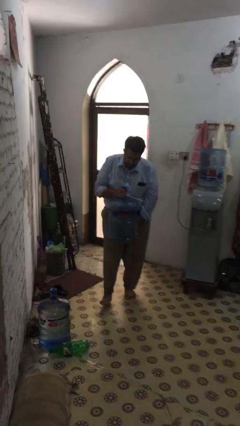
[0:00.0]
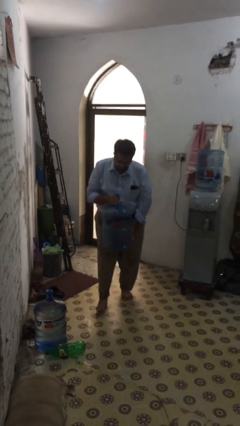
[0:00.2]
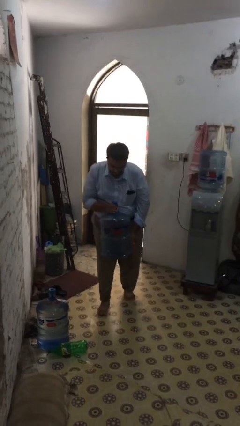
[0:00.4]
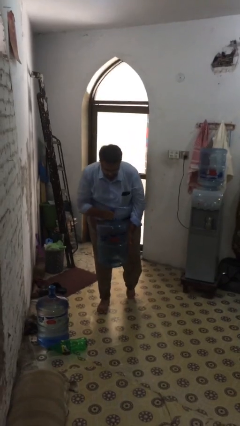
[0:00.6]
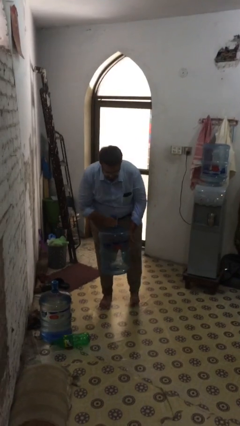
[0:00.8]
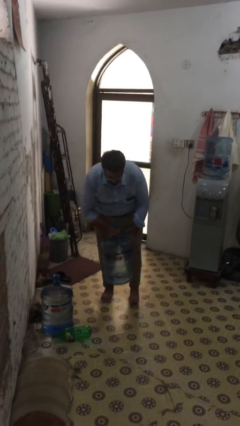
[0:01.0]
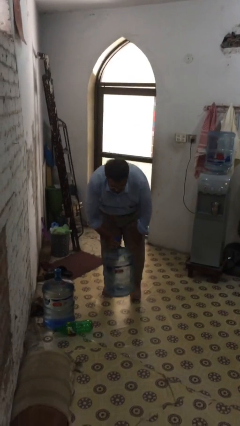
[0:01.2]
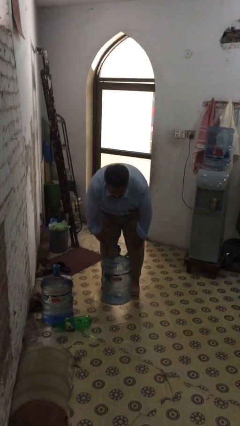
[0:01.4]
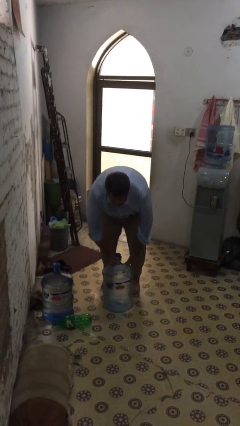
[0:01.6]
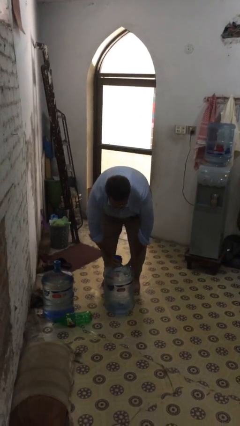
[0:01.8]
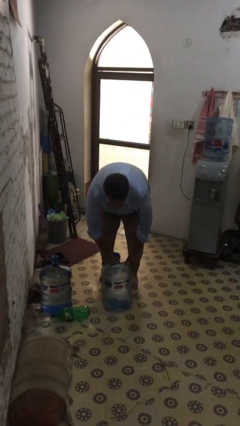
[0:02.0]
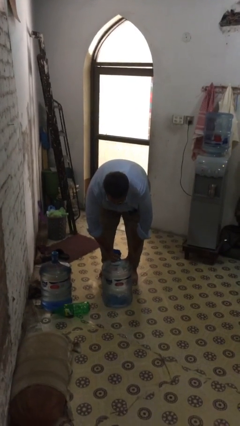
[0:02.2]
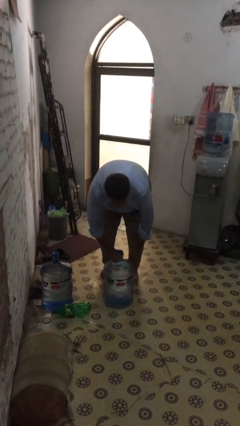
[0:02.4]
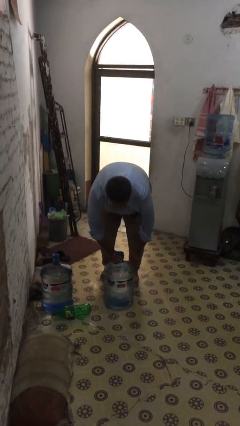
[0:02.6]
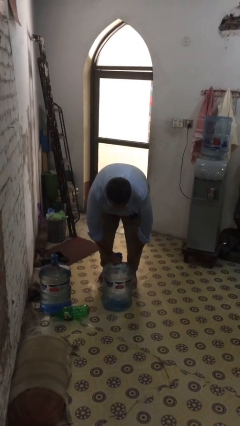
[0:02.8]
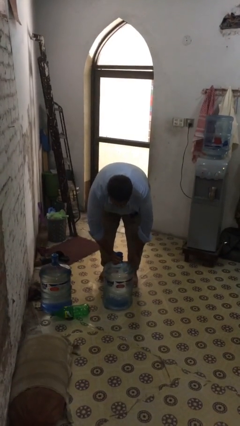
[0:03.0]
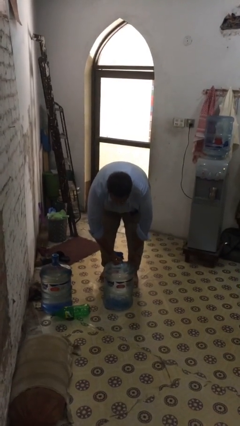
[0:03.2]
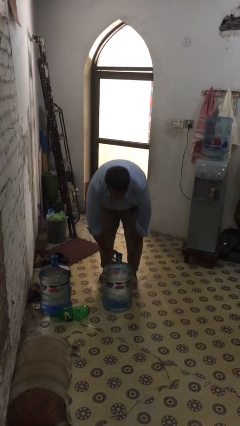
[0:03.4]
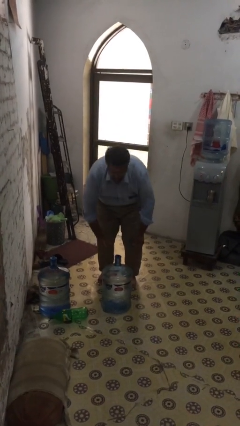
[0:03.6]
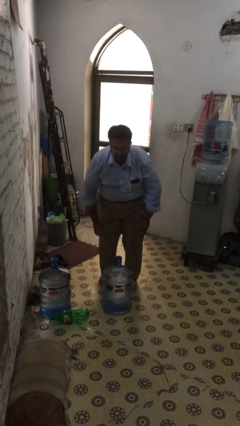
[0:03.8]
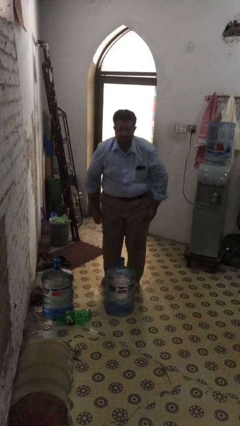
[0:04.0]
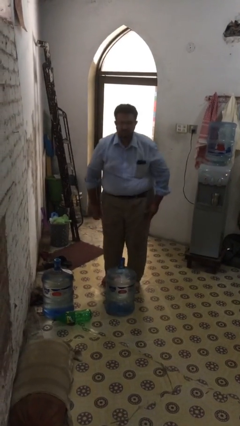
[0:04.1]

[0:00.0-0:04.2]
person puts down object on floor

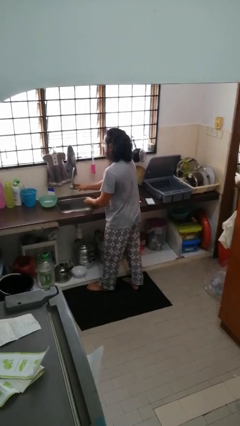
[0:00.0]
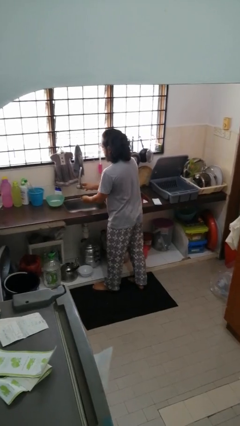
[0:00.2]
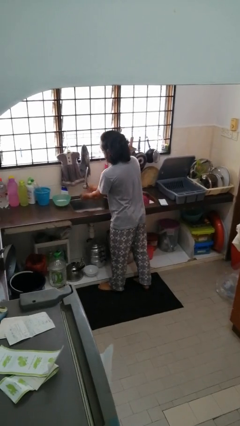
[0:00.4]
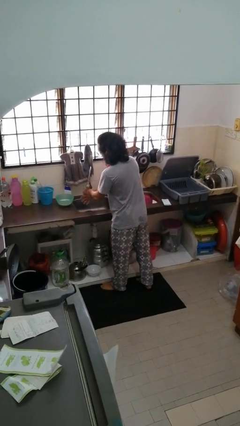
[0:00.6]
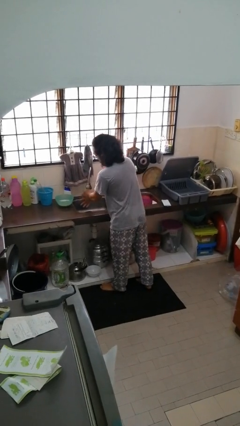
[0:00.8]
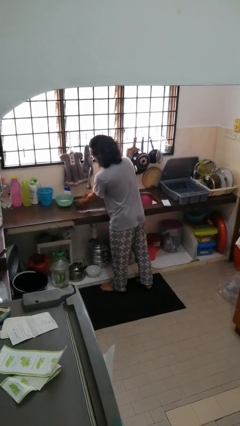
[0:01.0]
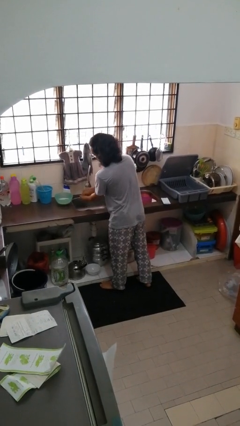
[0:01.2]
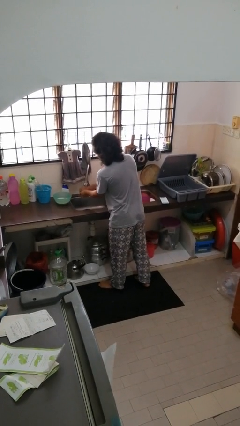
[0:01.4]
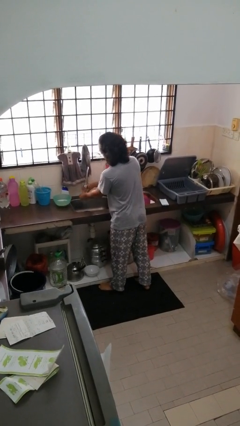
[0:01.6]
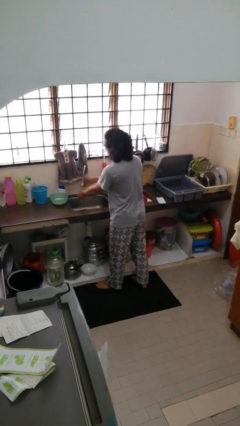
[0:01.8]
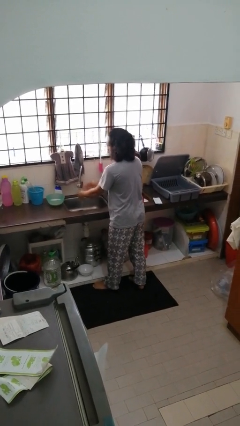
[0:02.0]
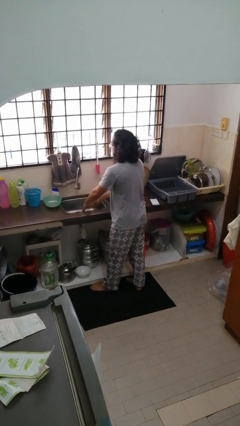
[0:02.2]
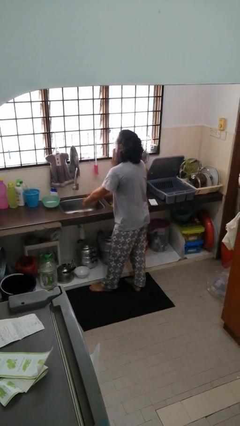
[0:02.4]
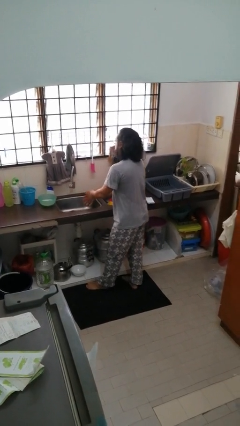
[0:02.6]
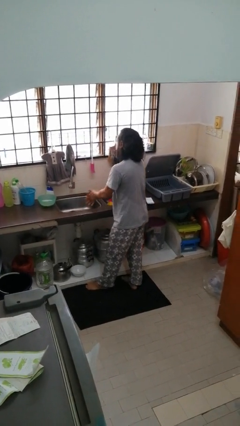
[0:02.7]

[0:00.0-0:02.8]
person washes hands

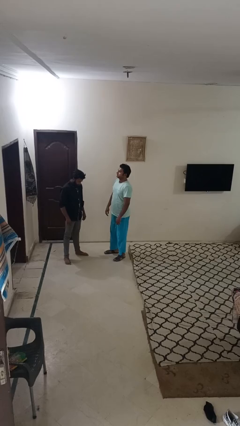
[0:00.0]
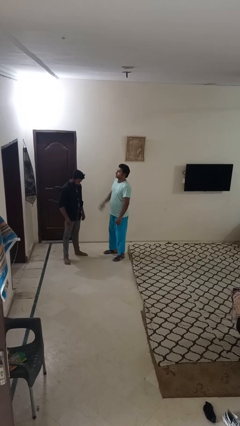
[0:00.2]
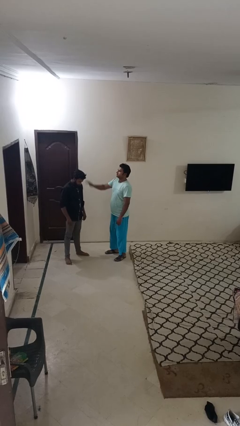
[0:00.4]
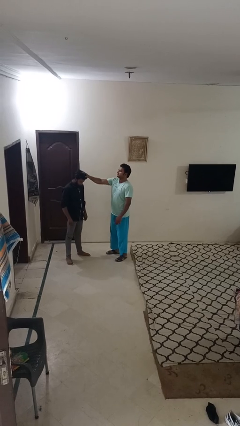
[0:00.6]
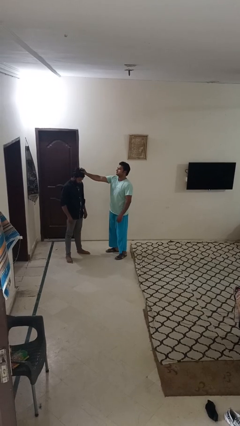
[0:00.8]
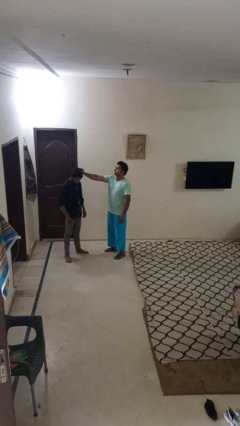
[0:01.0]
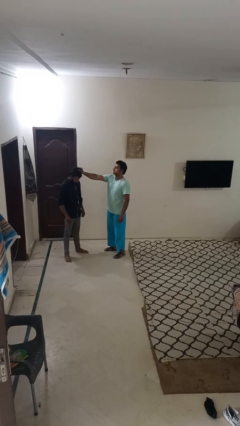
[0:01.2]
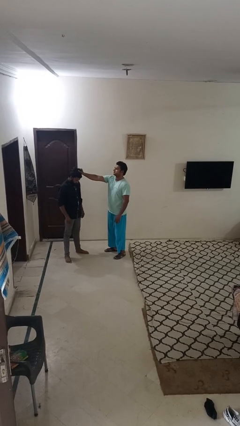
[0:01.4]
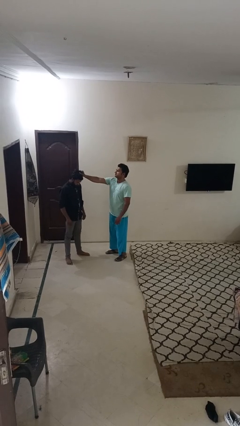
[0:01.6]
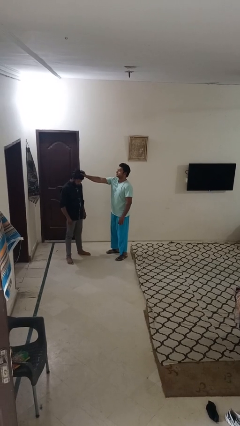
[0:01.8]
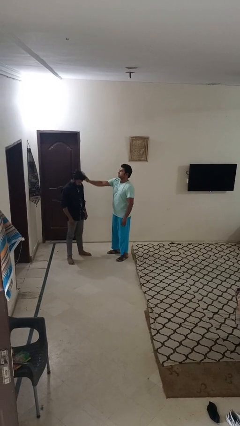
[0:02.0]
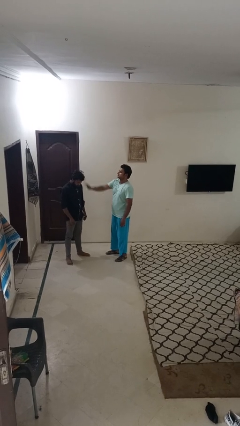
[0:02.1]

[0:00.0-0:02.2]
person grabs person by hair

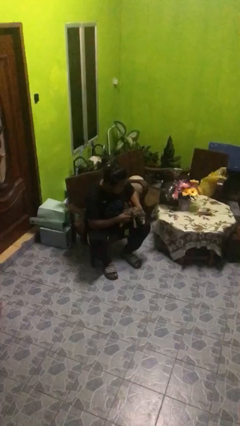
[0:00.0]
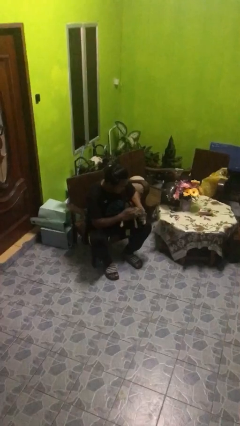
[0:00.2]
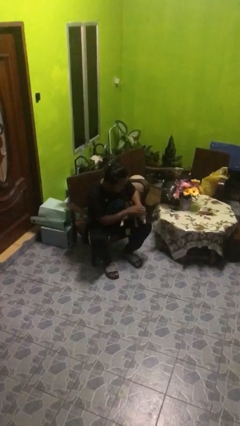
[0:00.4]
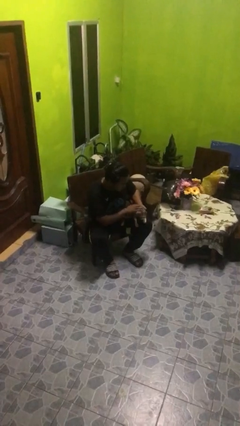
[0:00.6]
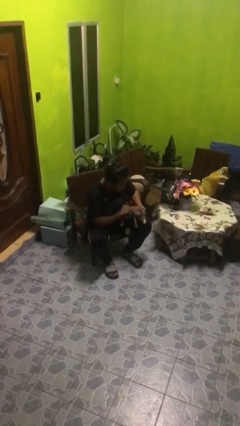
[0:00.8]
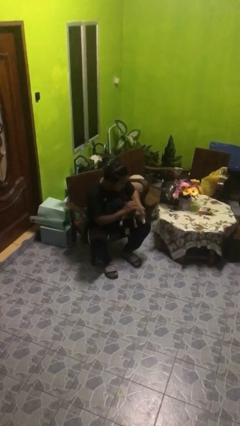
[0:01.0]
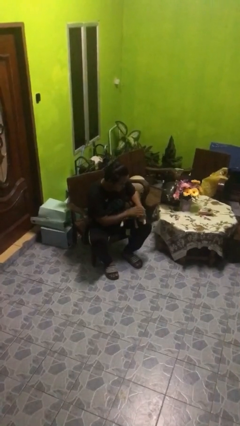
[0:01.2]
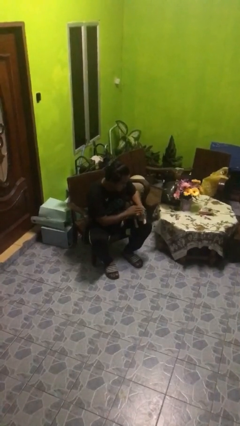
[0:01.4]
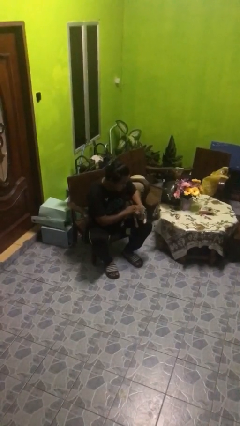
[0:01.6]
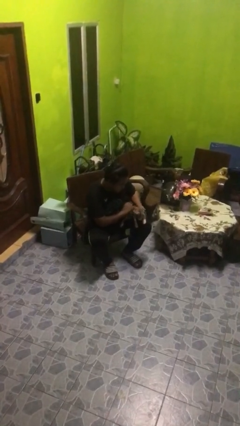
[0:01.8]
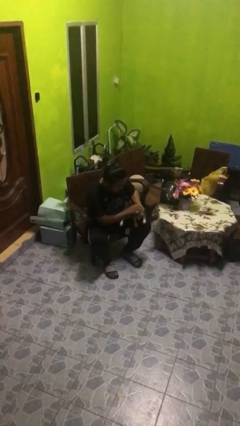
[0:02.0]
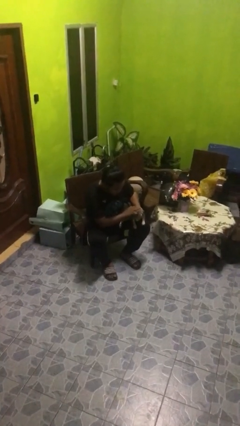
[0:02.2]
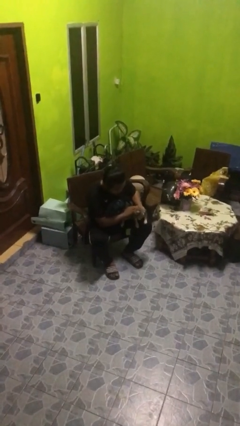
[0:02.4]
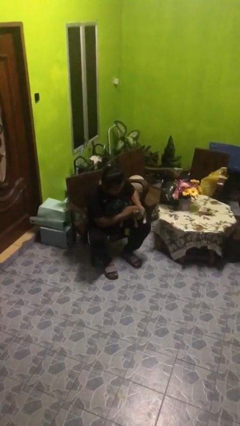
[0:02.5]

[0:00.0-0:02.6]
person pets cat

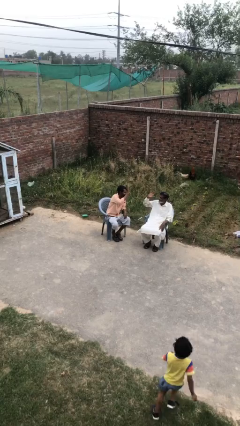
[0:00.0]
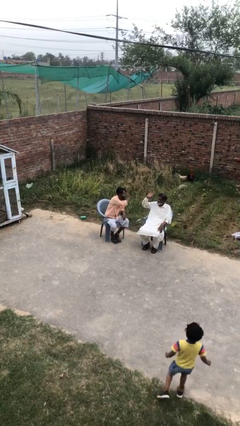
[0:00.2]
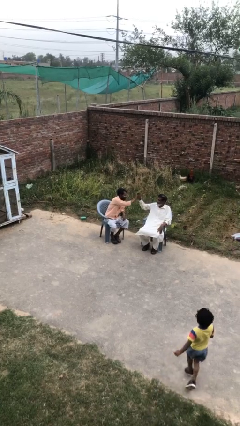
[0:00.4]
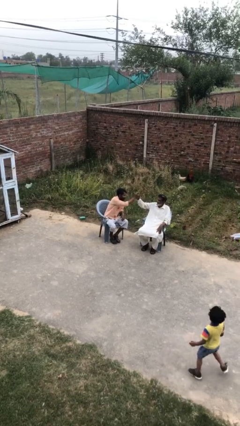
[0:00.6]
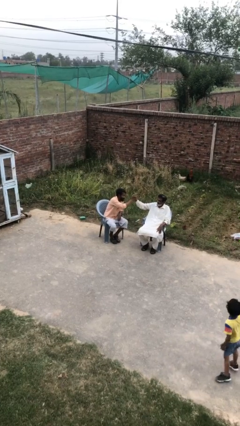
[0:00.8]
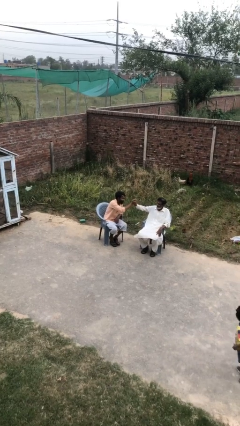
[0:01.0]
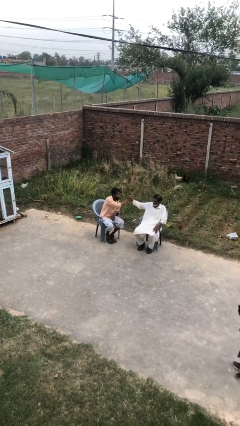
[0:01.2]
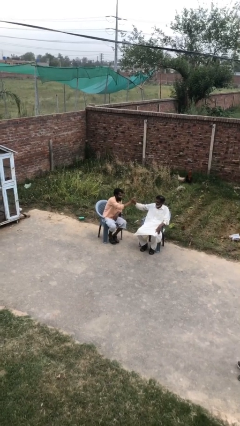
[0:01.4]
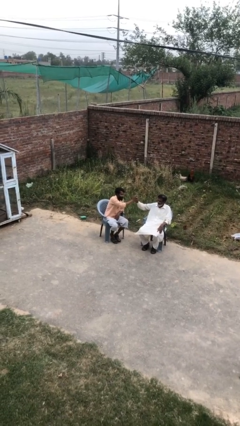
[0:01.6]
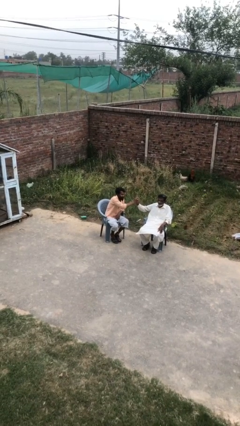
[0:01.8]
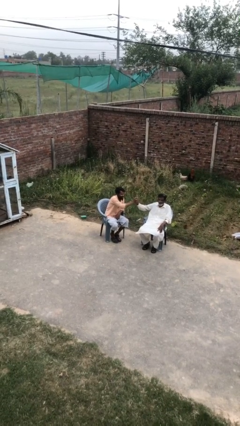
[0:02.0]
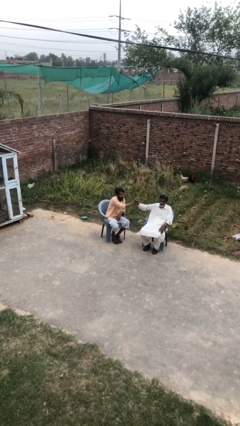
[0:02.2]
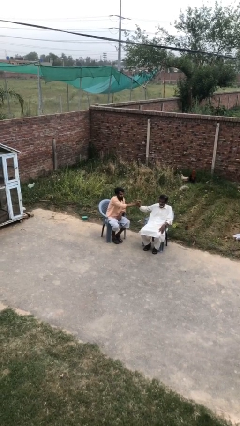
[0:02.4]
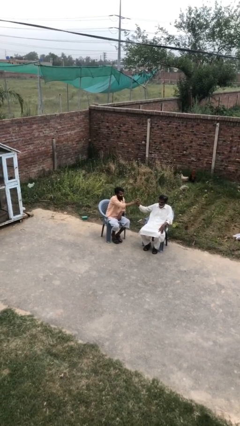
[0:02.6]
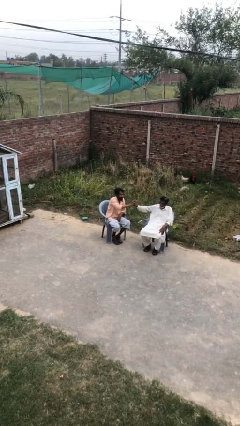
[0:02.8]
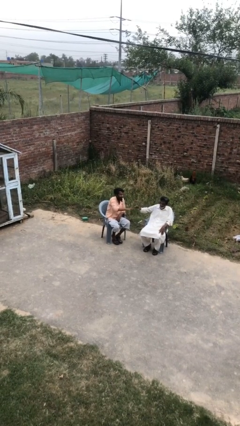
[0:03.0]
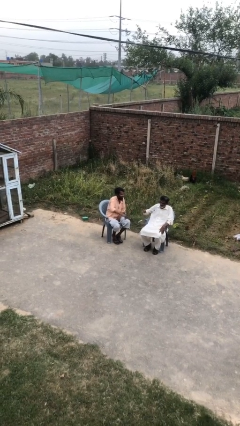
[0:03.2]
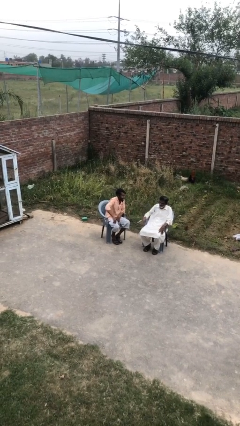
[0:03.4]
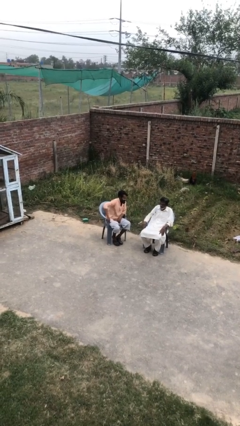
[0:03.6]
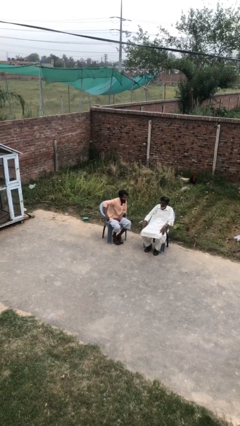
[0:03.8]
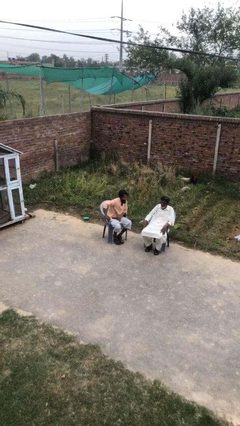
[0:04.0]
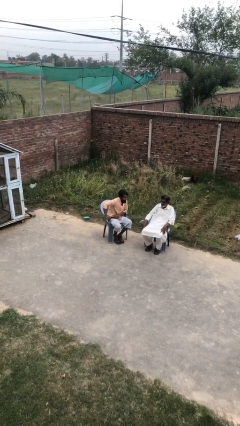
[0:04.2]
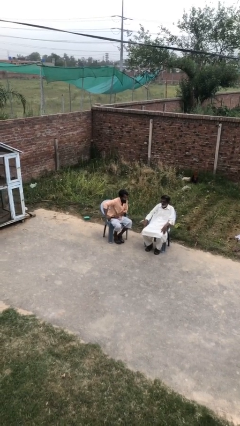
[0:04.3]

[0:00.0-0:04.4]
person highfives hand

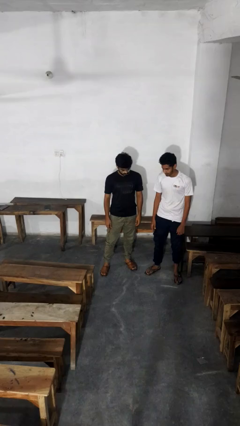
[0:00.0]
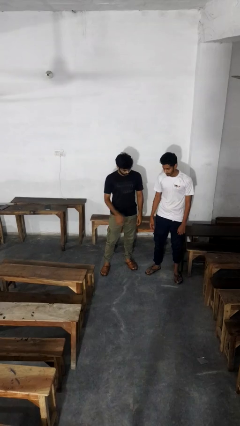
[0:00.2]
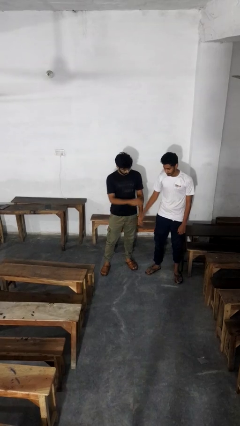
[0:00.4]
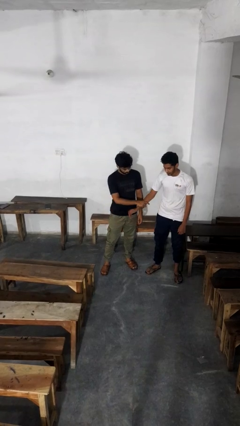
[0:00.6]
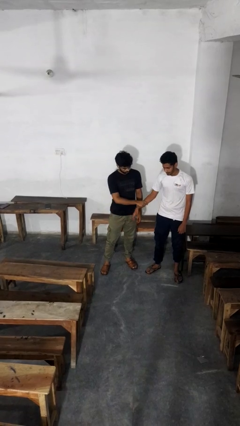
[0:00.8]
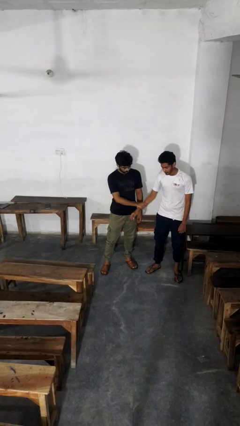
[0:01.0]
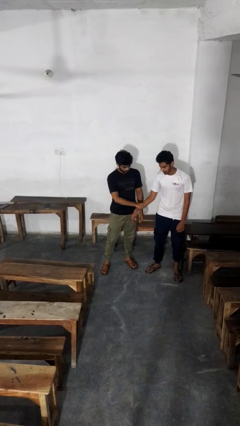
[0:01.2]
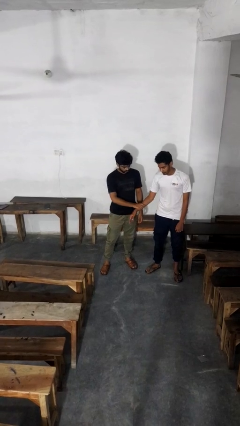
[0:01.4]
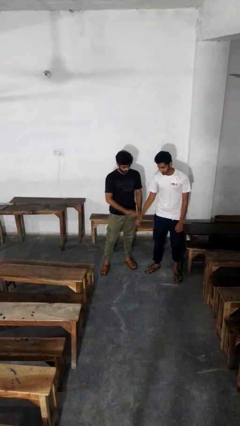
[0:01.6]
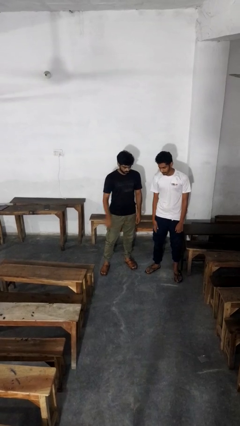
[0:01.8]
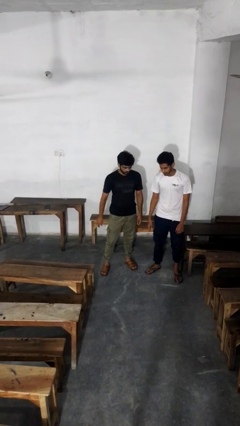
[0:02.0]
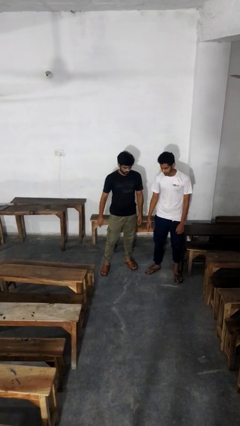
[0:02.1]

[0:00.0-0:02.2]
person grabs person by forearm
